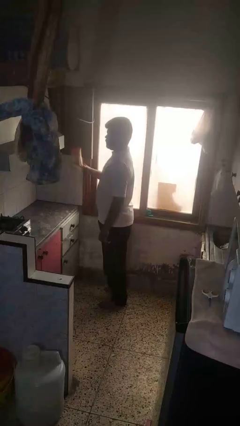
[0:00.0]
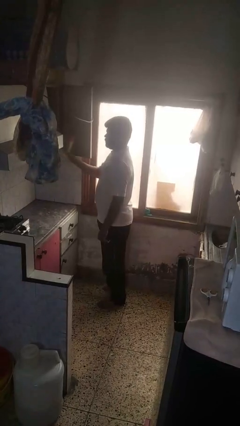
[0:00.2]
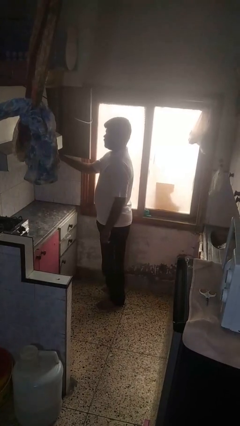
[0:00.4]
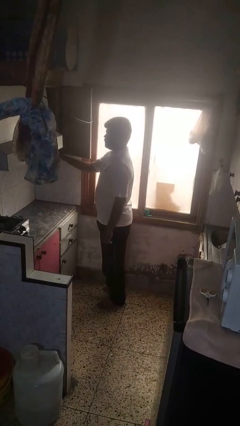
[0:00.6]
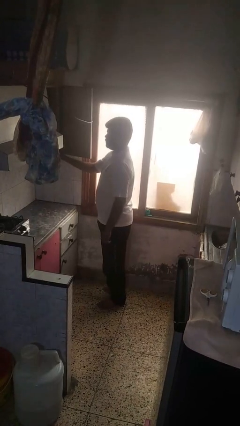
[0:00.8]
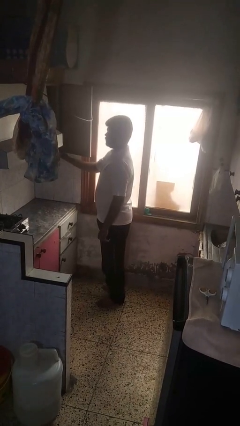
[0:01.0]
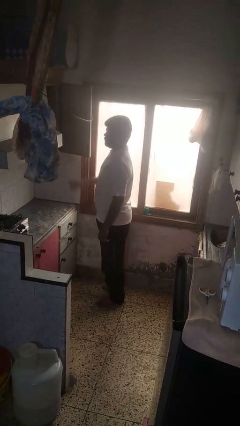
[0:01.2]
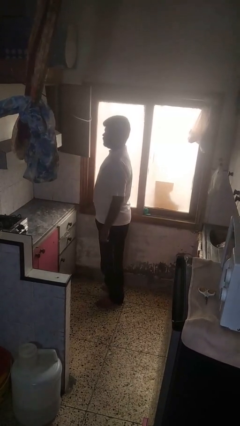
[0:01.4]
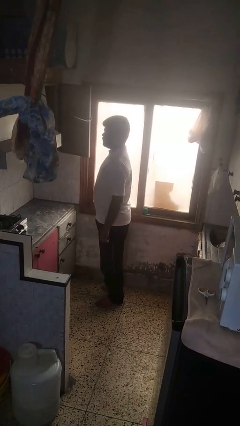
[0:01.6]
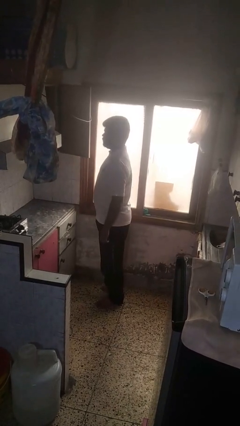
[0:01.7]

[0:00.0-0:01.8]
person puts down object into cabinet

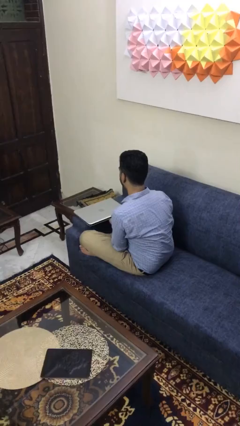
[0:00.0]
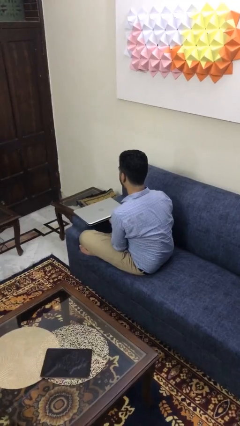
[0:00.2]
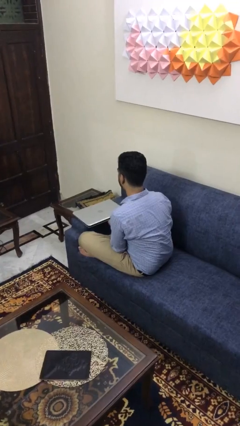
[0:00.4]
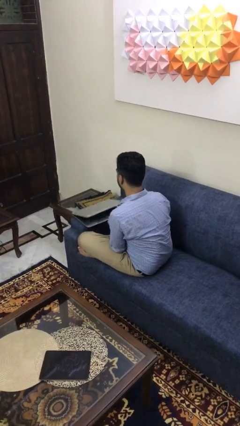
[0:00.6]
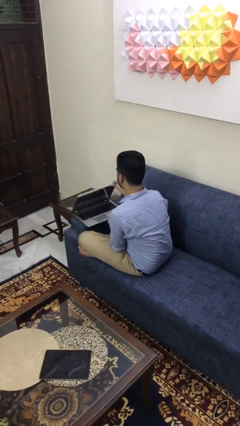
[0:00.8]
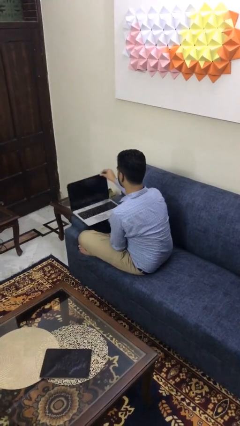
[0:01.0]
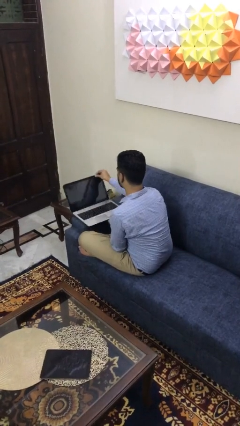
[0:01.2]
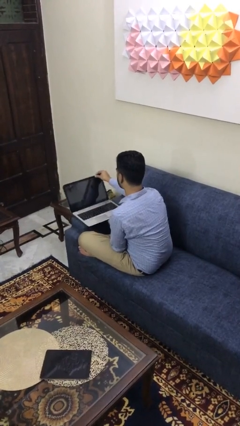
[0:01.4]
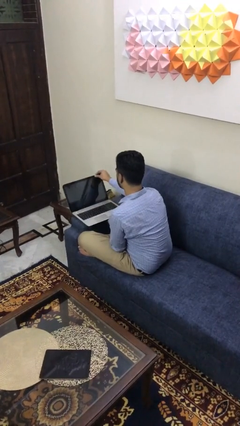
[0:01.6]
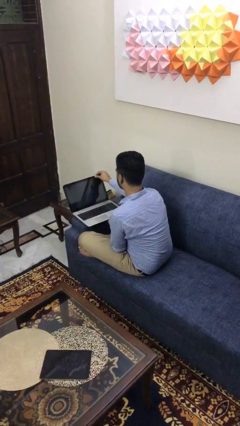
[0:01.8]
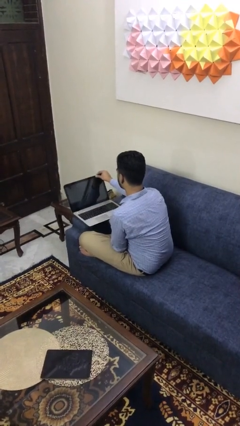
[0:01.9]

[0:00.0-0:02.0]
person opens laptop

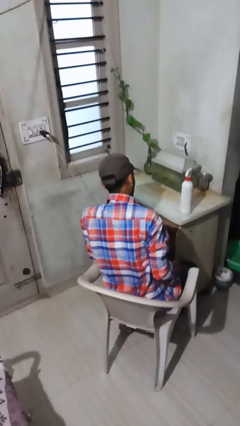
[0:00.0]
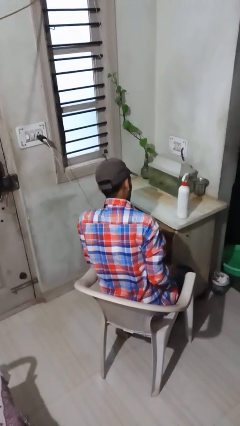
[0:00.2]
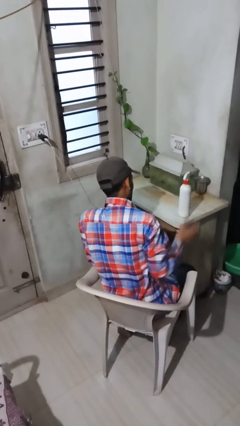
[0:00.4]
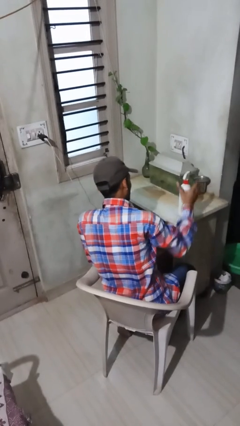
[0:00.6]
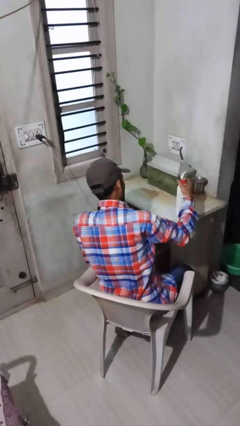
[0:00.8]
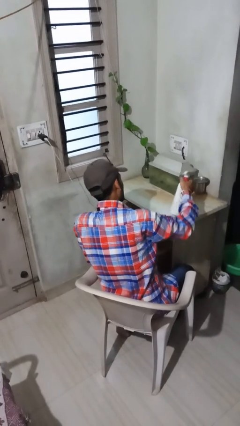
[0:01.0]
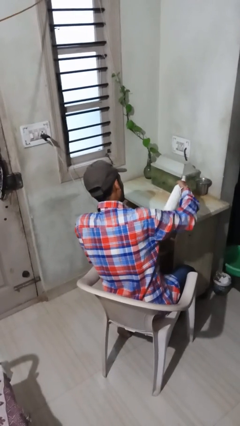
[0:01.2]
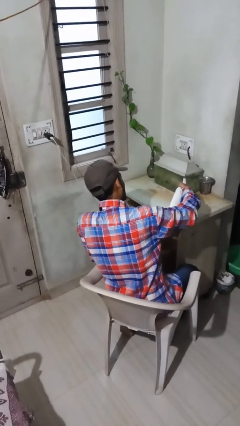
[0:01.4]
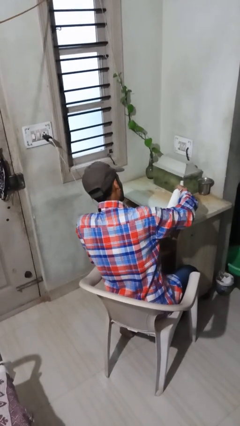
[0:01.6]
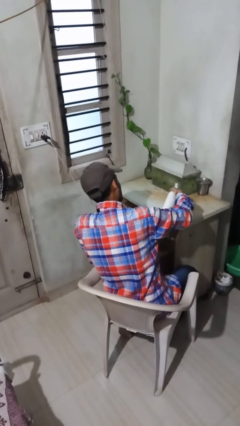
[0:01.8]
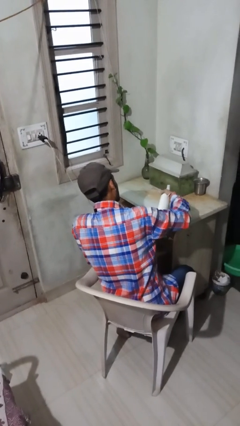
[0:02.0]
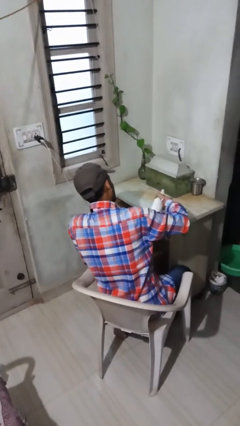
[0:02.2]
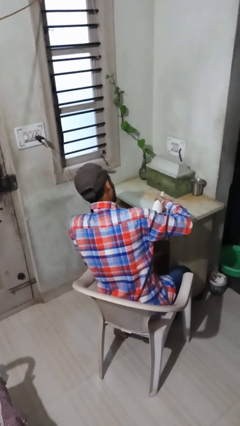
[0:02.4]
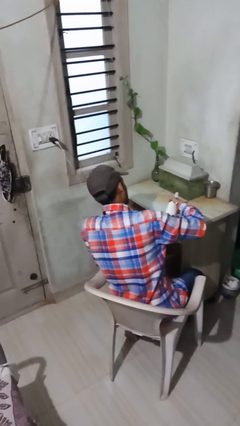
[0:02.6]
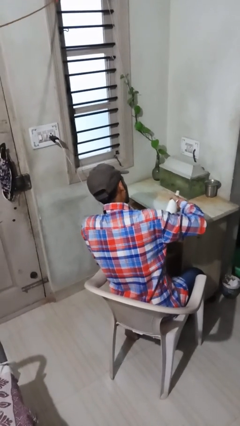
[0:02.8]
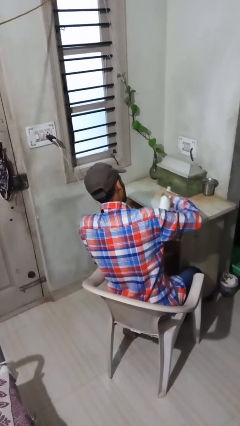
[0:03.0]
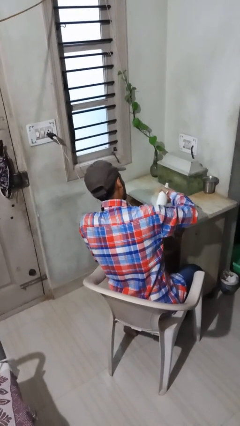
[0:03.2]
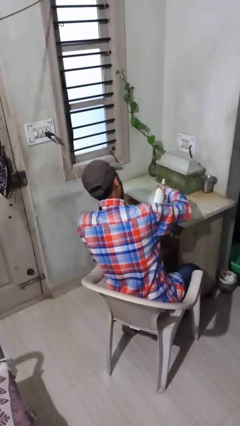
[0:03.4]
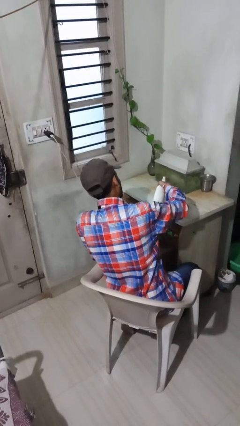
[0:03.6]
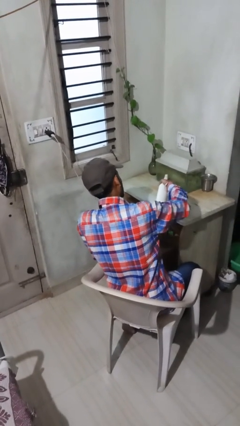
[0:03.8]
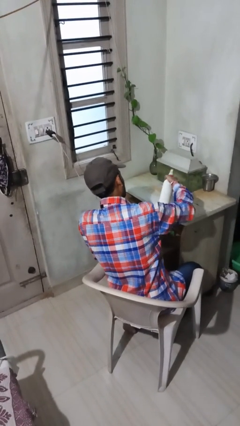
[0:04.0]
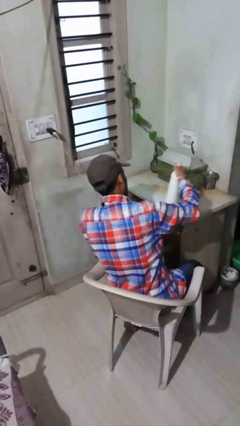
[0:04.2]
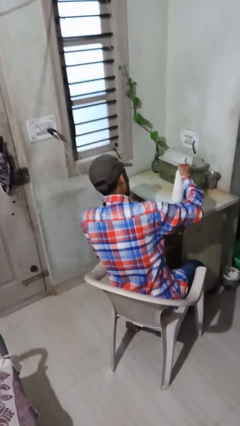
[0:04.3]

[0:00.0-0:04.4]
person sprays from bottle

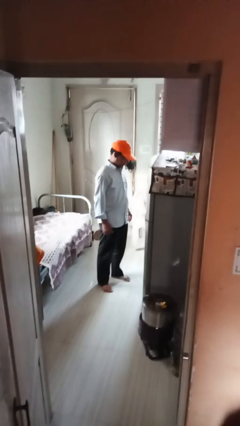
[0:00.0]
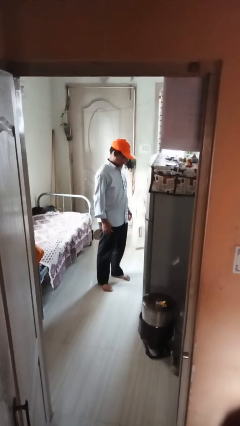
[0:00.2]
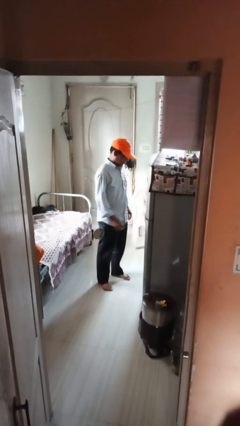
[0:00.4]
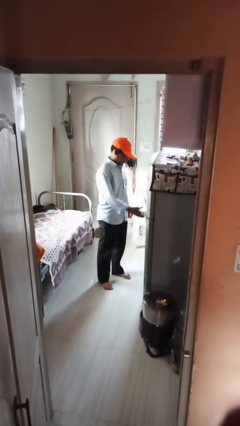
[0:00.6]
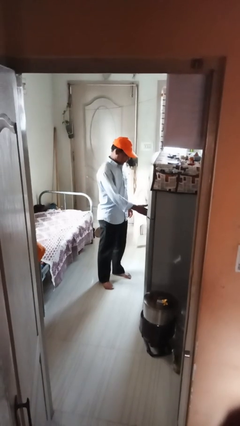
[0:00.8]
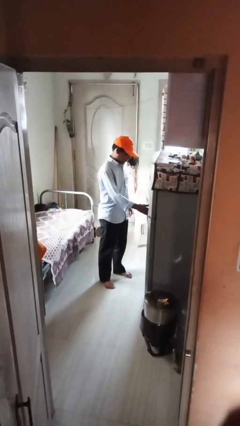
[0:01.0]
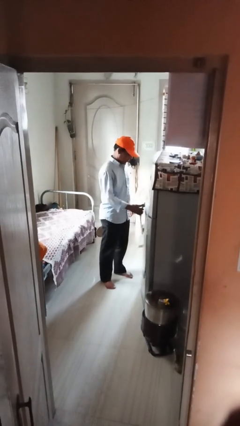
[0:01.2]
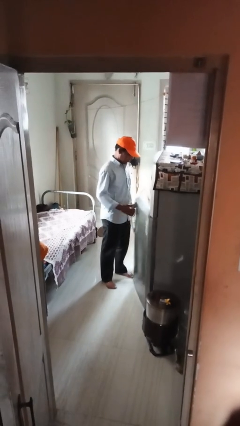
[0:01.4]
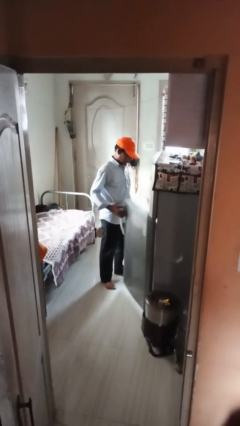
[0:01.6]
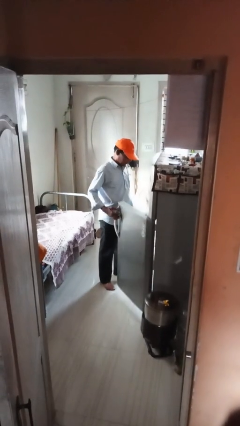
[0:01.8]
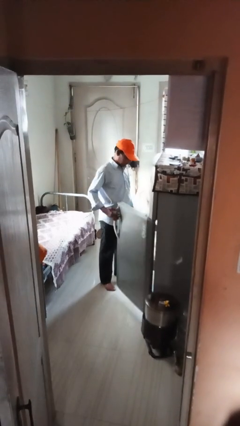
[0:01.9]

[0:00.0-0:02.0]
person opens refrigerator

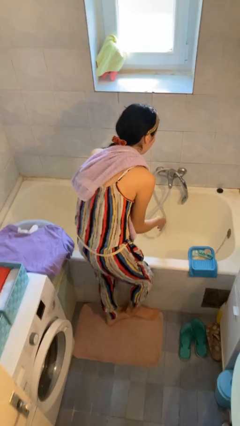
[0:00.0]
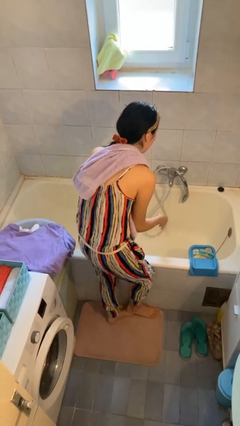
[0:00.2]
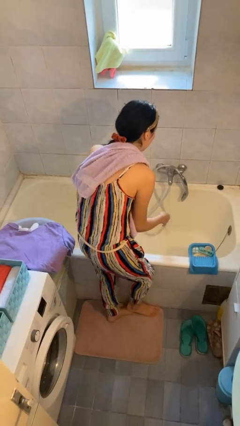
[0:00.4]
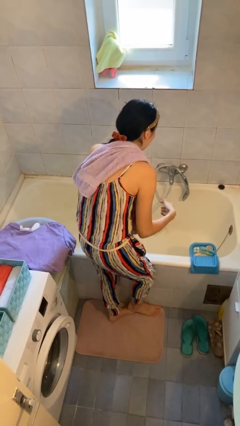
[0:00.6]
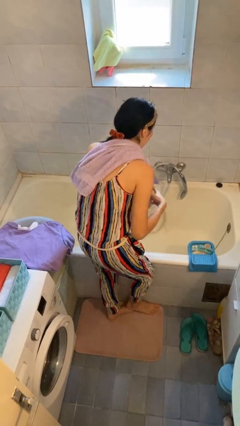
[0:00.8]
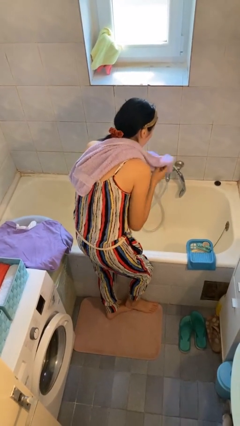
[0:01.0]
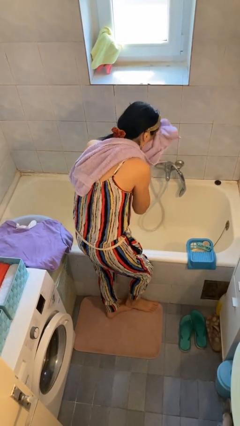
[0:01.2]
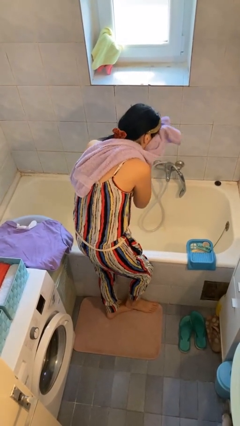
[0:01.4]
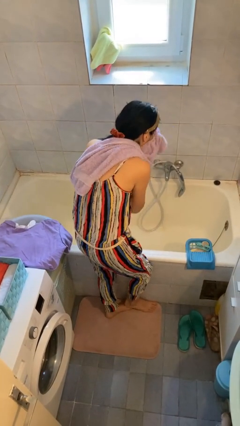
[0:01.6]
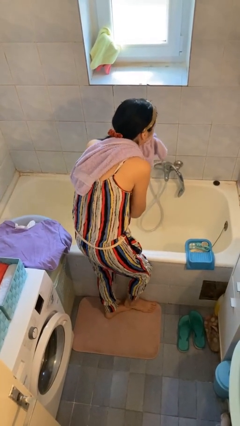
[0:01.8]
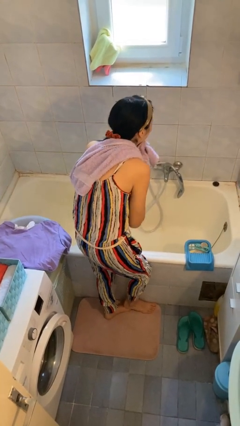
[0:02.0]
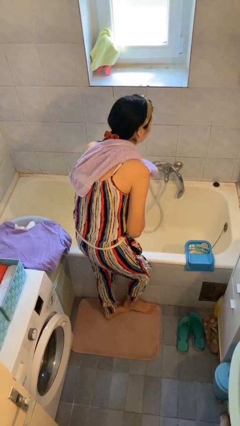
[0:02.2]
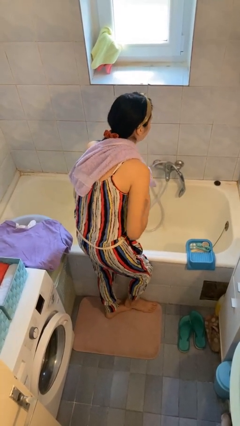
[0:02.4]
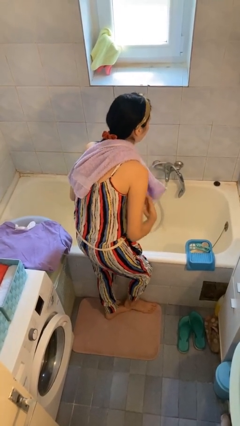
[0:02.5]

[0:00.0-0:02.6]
person dries face with towel

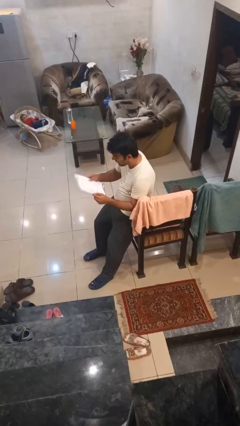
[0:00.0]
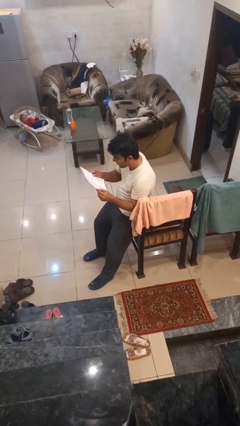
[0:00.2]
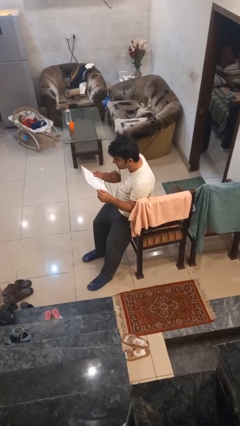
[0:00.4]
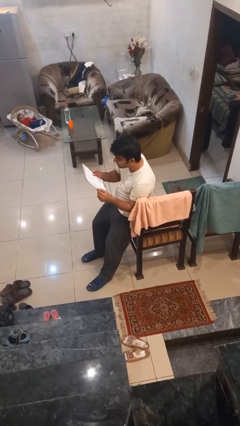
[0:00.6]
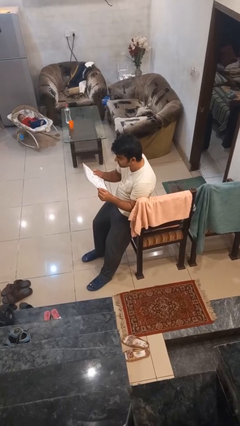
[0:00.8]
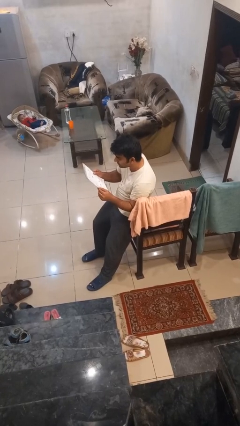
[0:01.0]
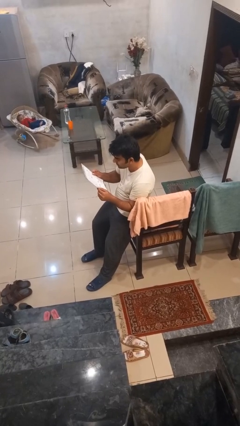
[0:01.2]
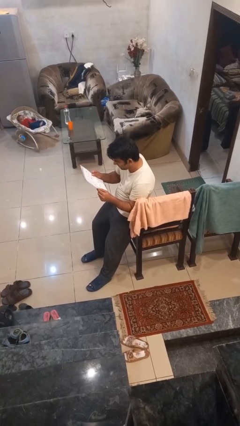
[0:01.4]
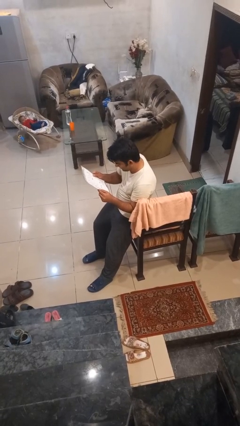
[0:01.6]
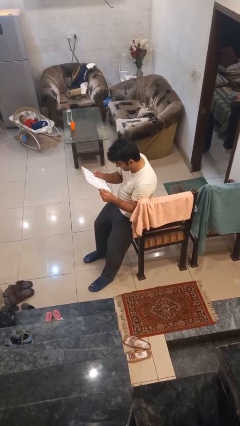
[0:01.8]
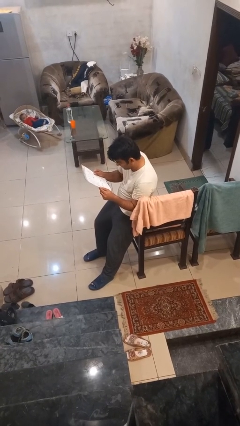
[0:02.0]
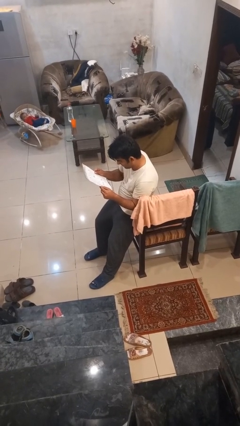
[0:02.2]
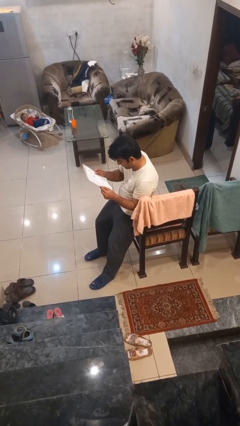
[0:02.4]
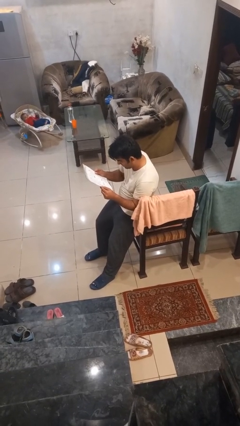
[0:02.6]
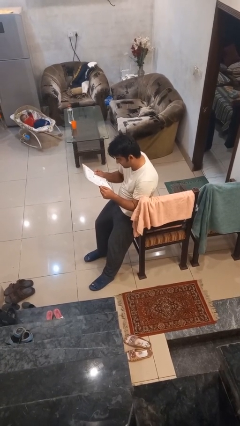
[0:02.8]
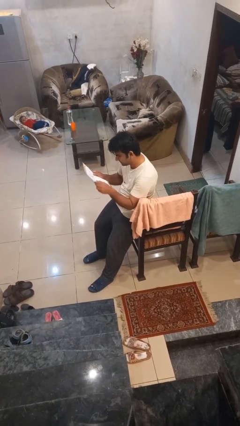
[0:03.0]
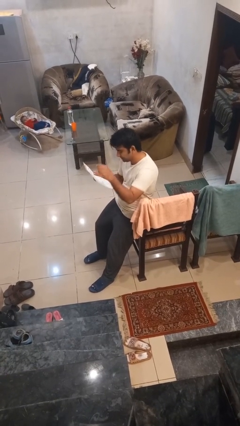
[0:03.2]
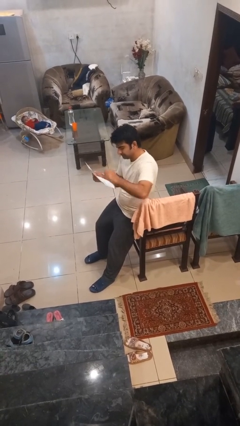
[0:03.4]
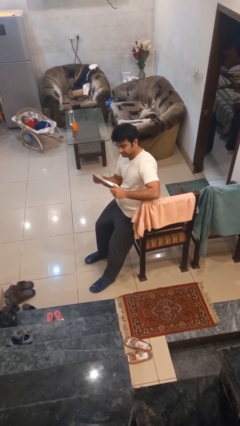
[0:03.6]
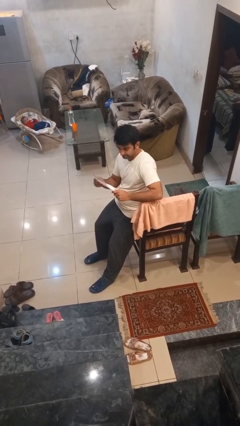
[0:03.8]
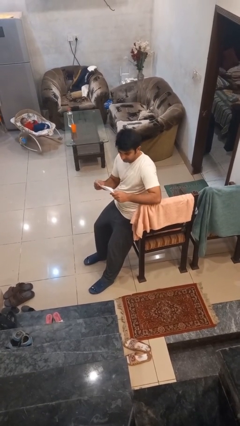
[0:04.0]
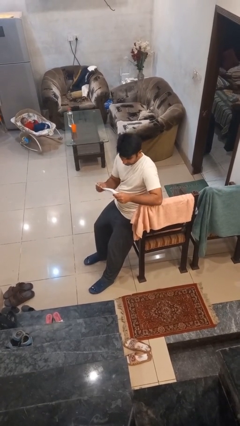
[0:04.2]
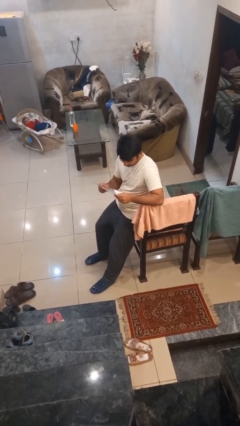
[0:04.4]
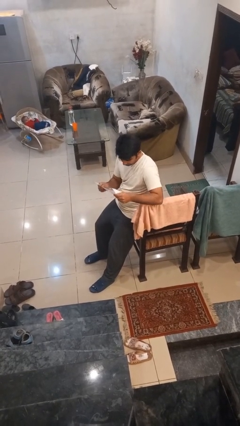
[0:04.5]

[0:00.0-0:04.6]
person reads document

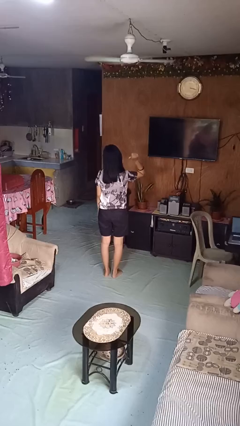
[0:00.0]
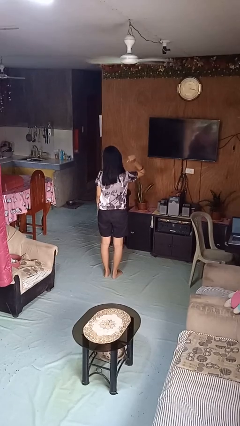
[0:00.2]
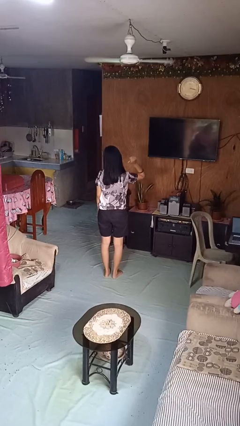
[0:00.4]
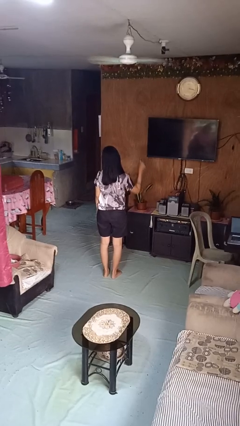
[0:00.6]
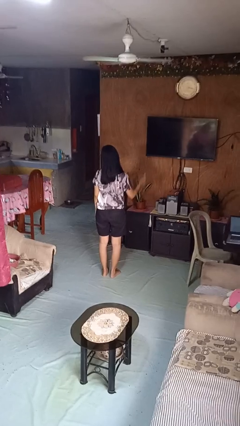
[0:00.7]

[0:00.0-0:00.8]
person gestures behind me
